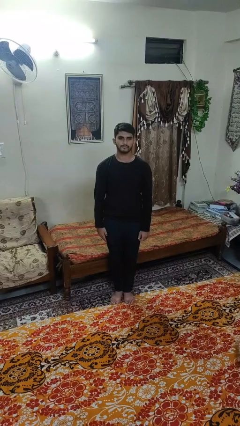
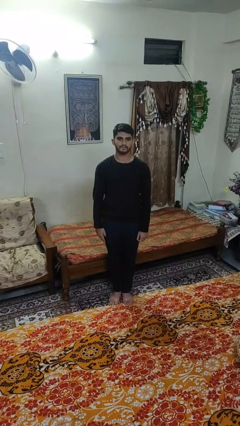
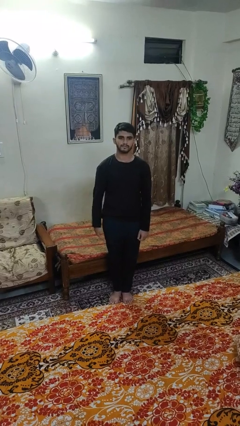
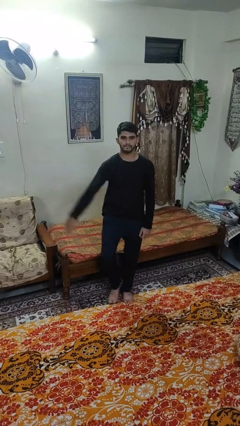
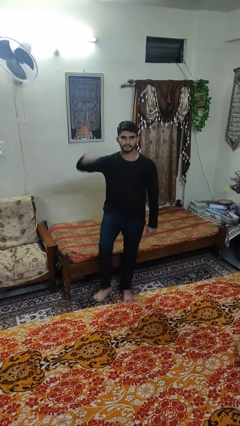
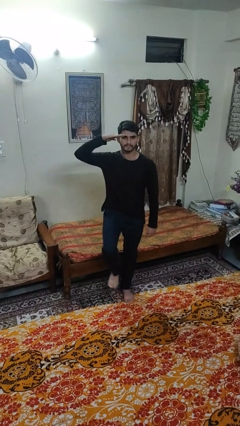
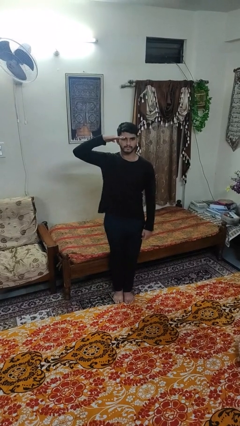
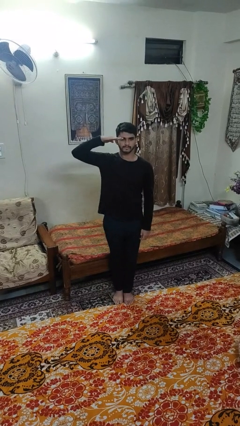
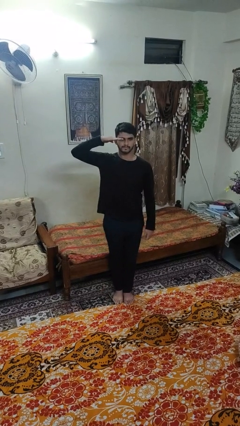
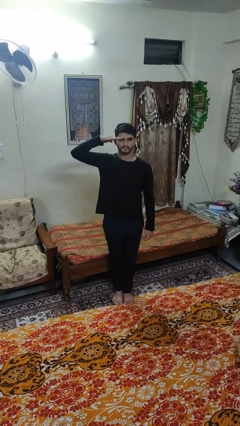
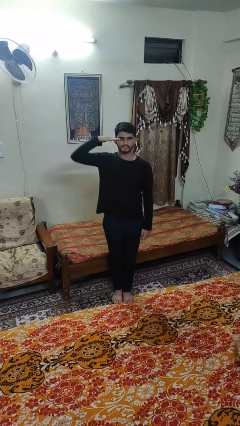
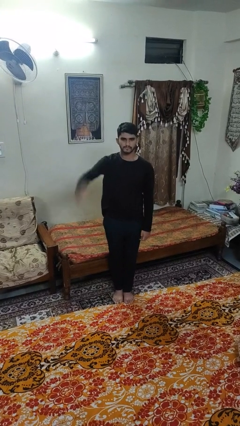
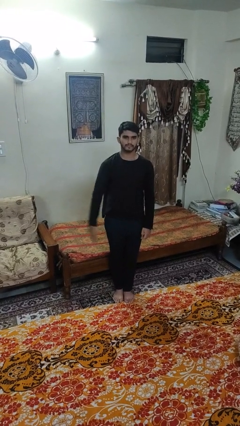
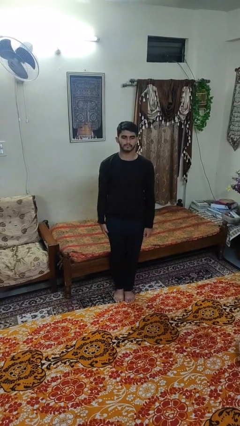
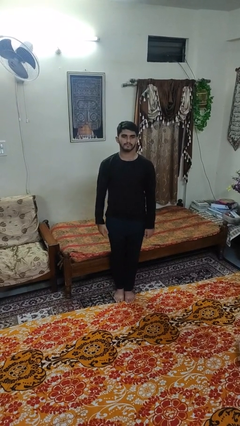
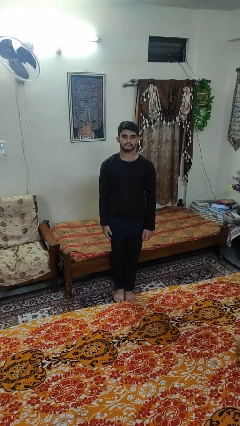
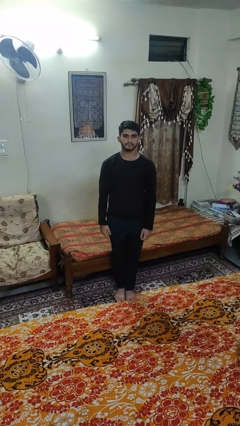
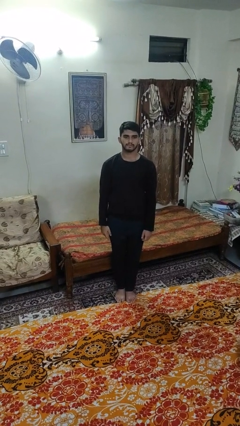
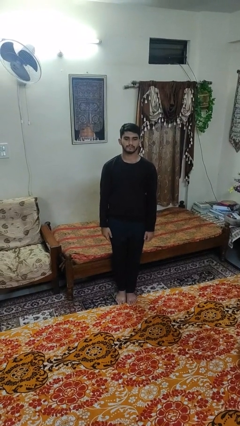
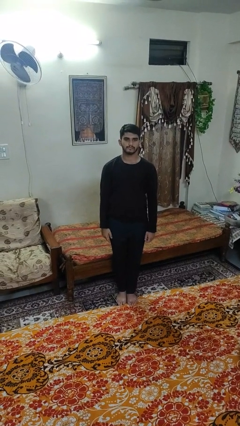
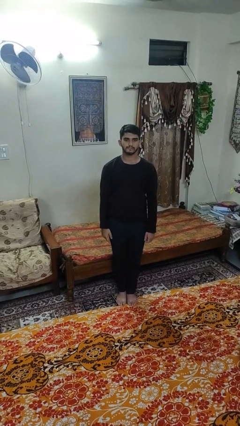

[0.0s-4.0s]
person salutes

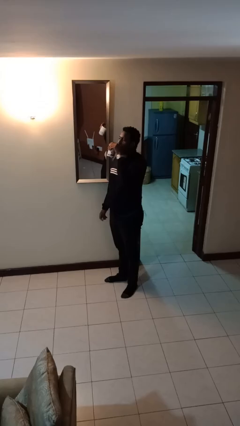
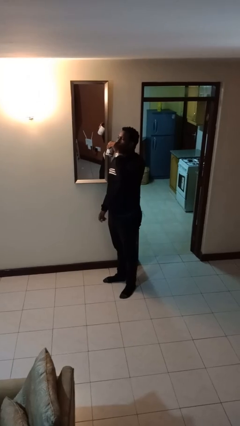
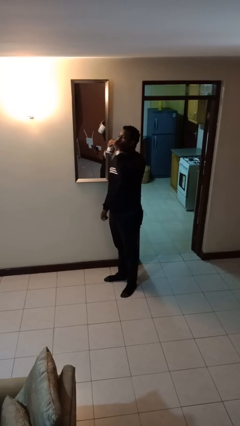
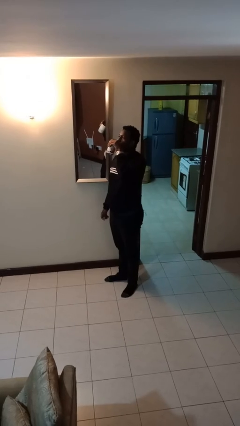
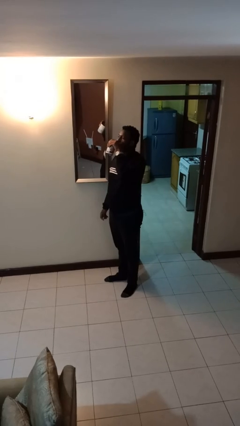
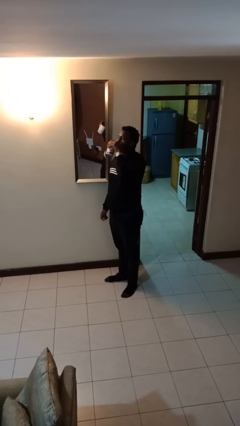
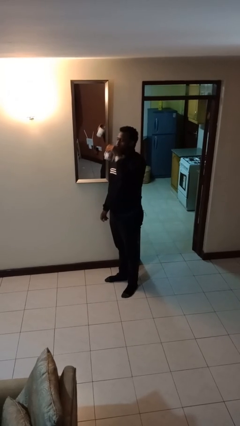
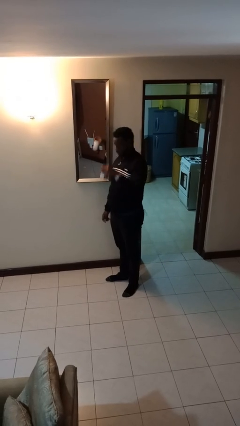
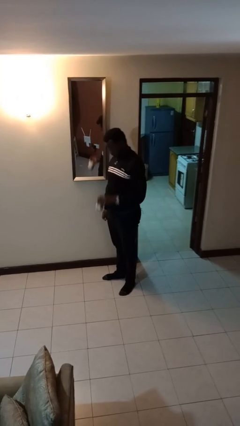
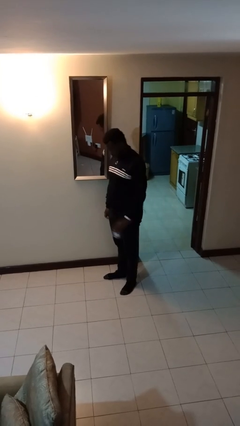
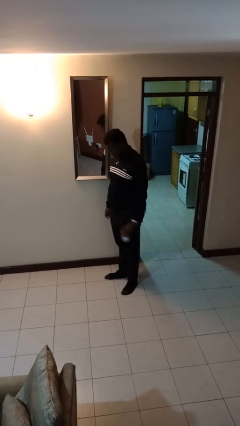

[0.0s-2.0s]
person drinks from beverage can

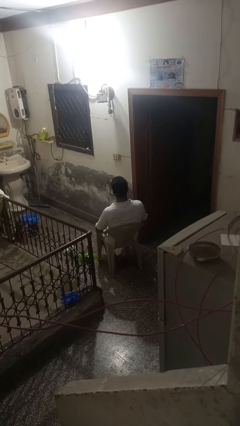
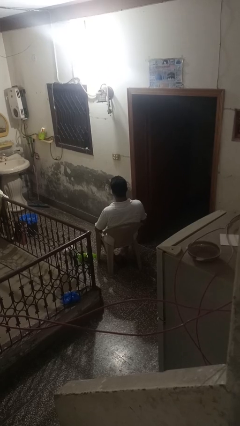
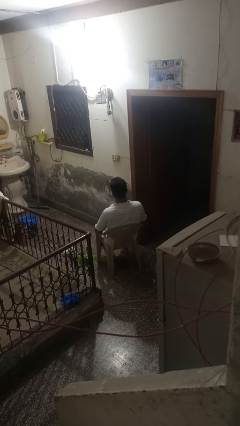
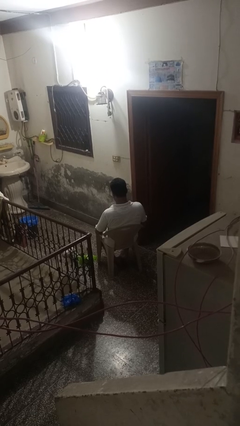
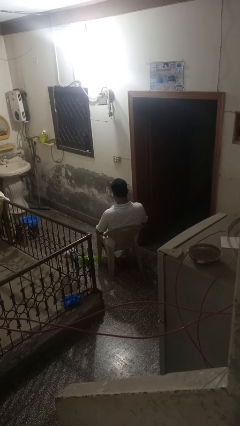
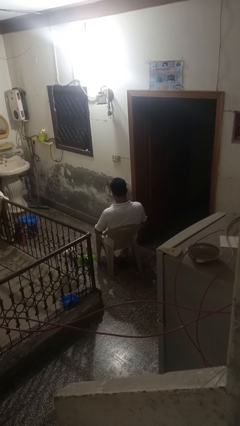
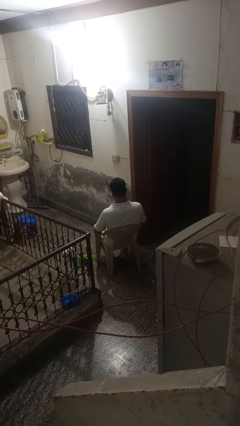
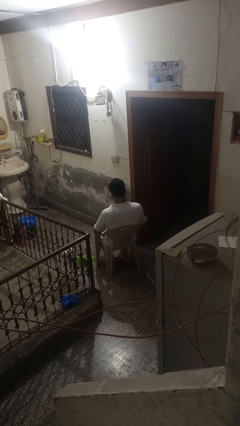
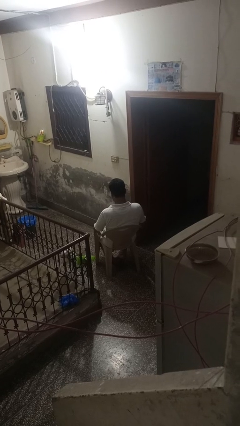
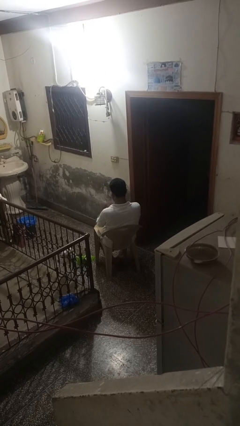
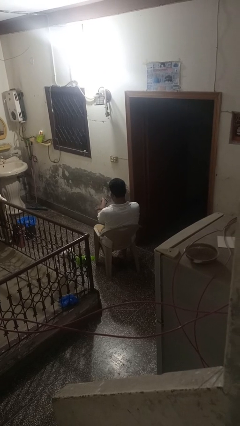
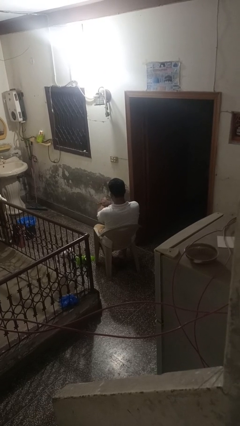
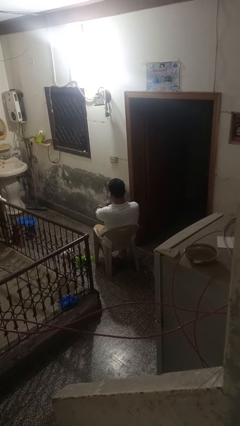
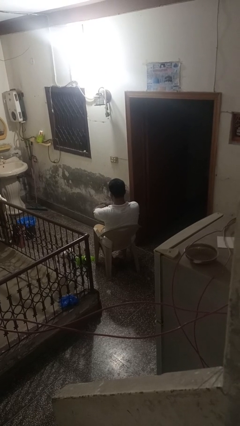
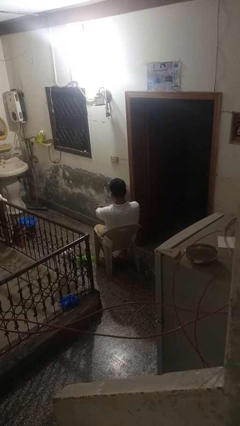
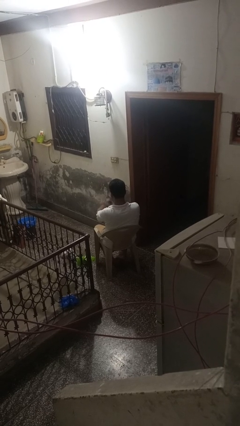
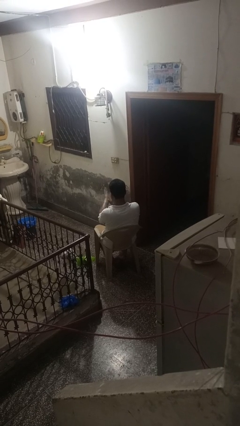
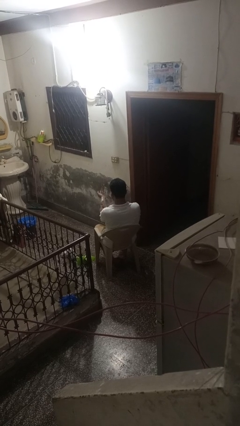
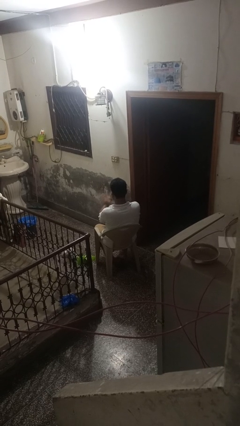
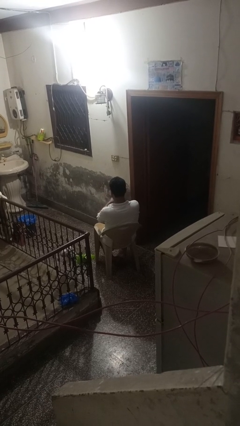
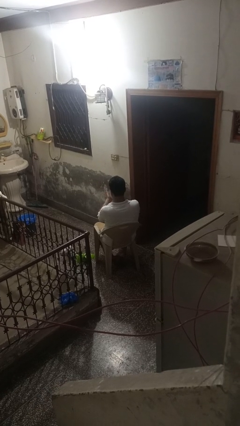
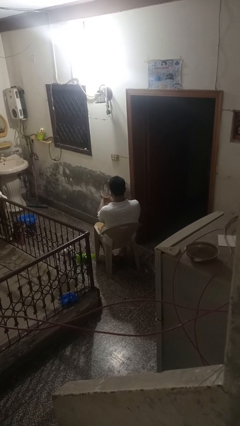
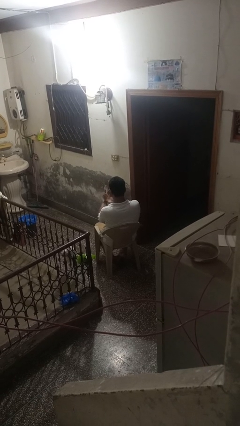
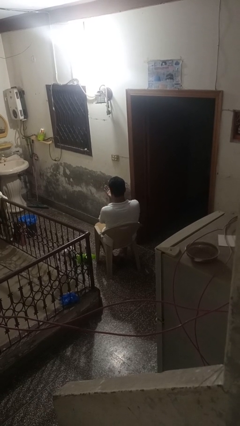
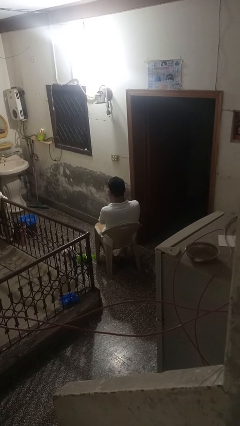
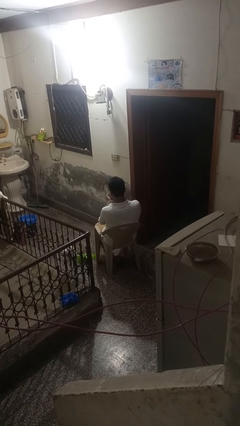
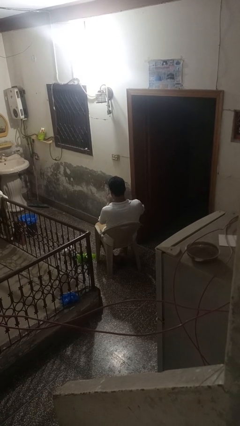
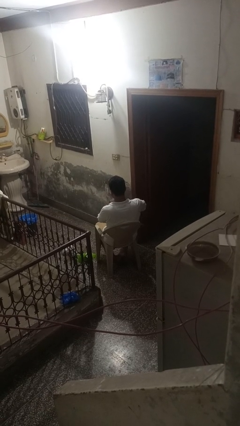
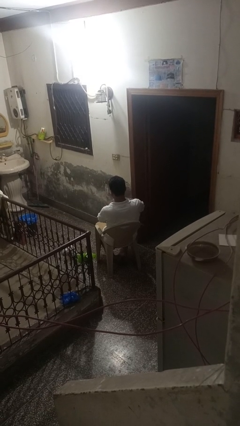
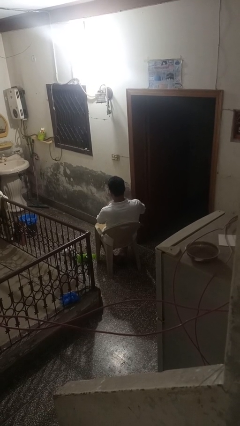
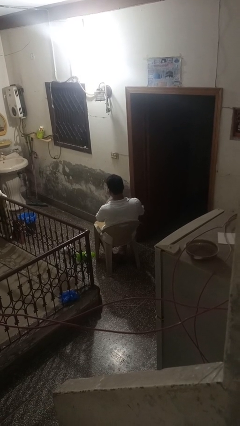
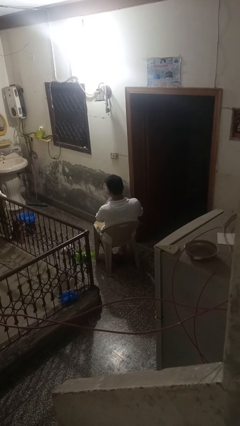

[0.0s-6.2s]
person applies sunscreen

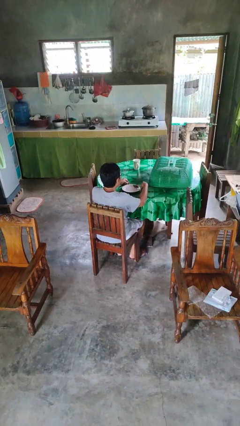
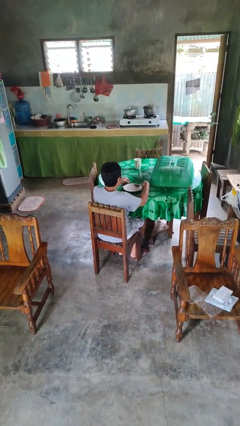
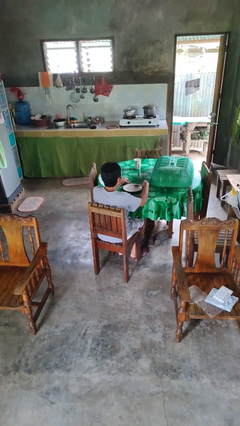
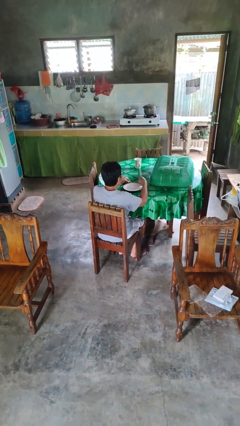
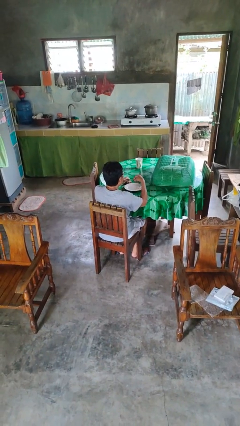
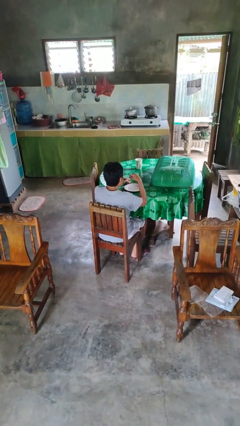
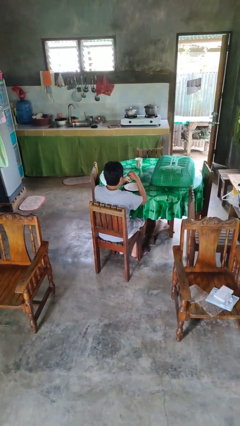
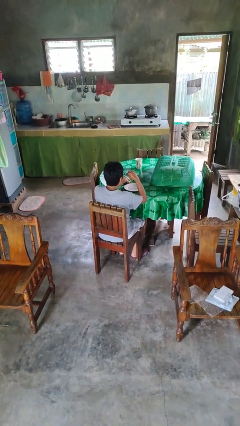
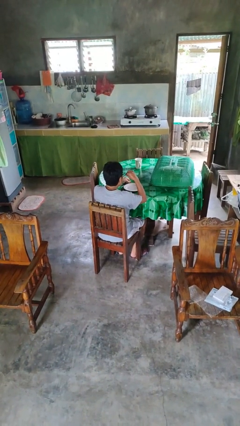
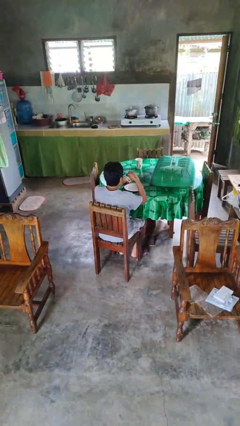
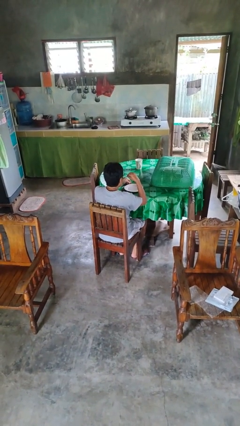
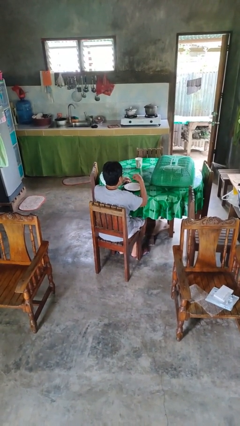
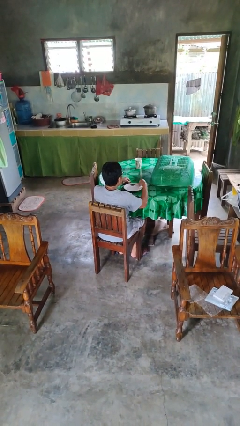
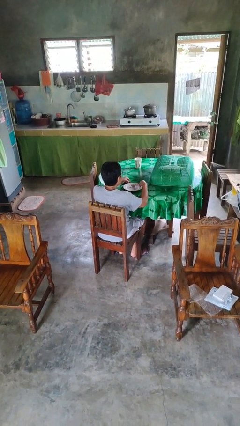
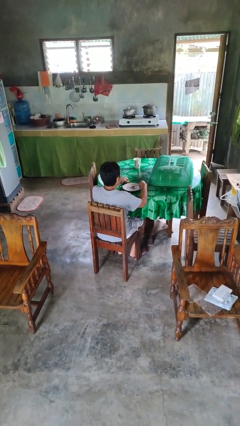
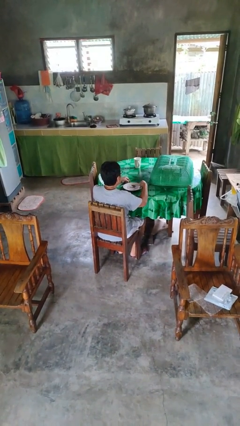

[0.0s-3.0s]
person eats with utensil

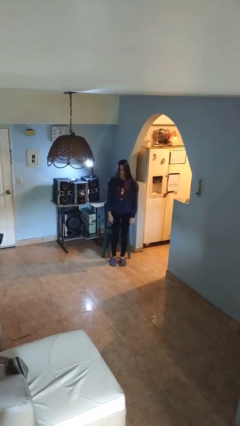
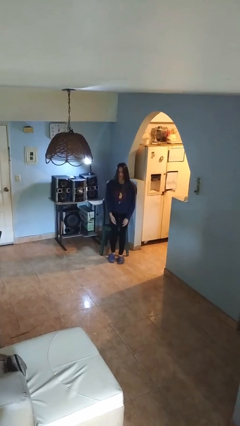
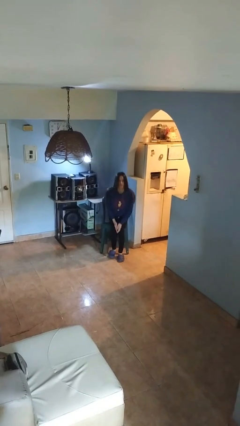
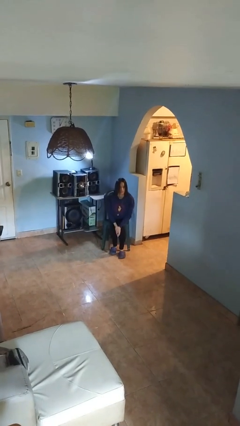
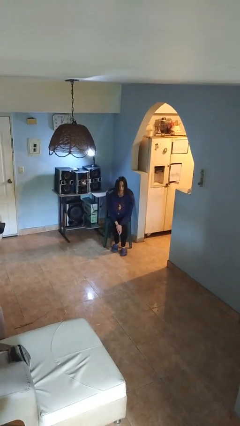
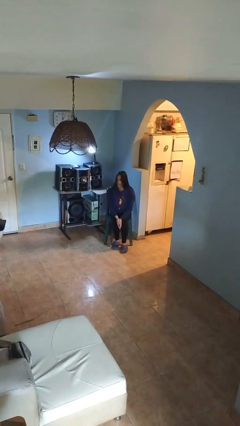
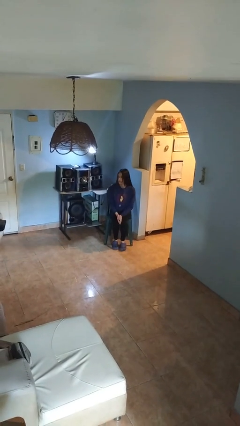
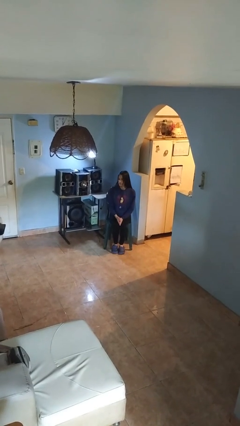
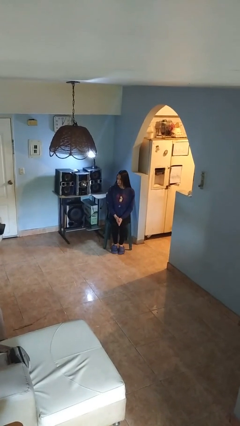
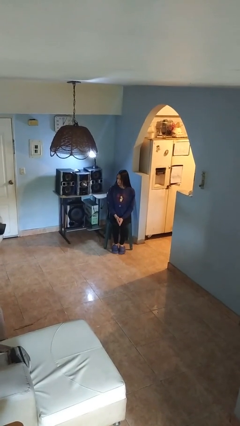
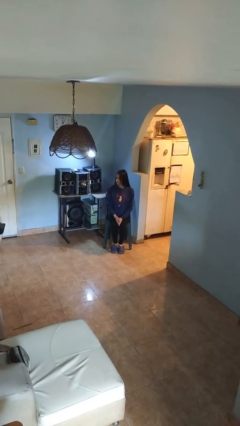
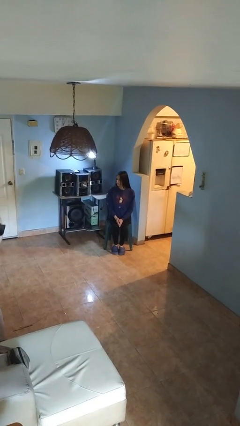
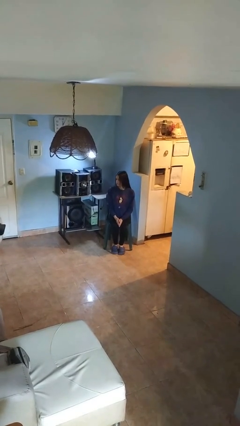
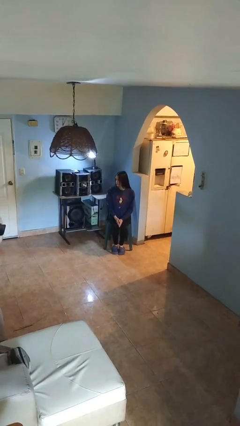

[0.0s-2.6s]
person sits down
